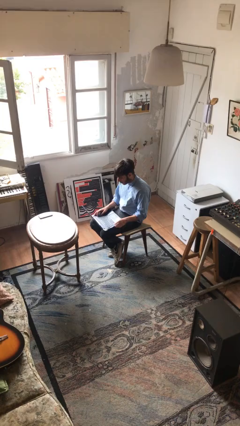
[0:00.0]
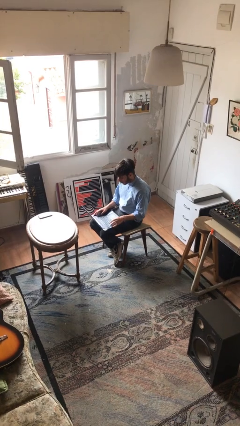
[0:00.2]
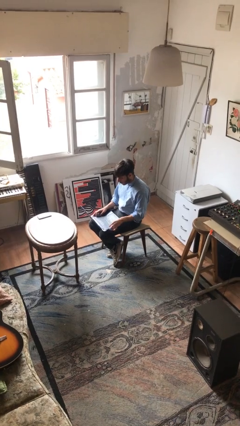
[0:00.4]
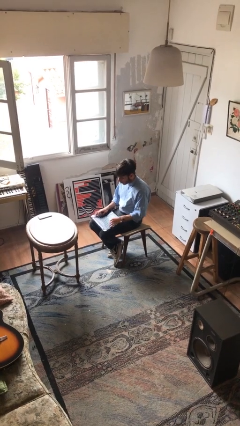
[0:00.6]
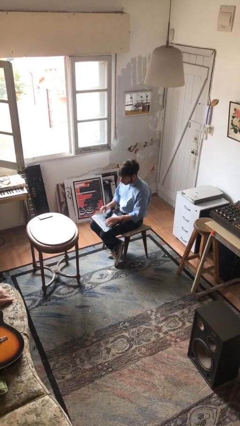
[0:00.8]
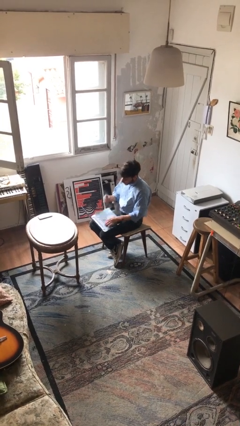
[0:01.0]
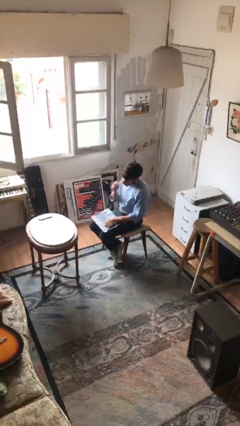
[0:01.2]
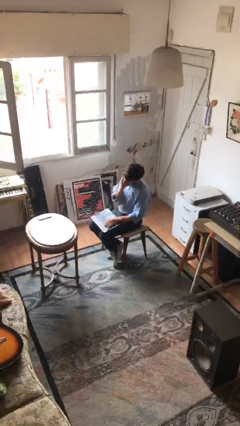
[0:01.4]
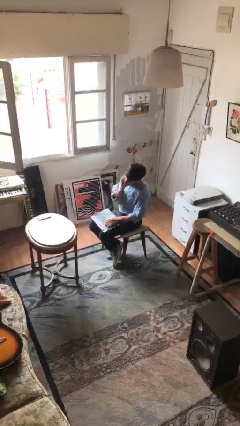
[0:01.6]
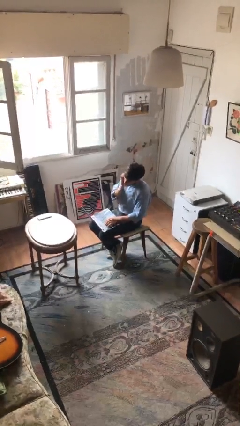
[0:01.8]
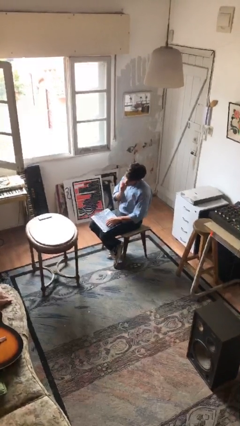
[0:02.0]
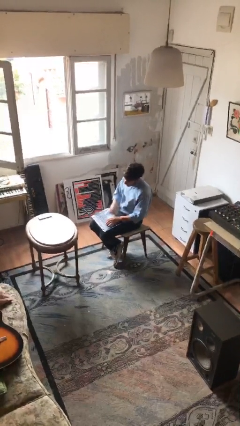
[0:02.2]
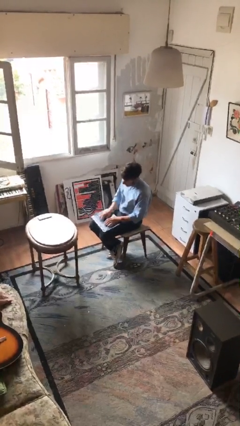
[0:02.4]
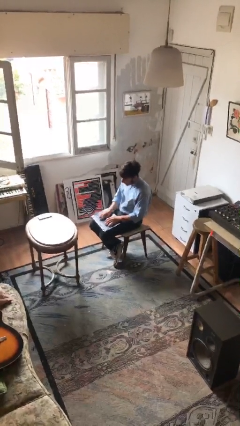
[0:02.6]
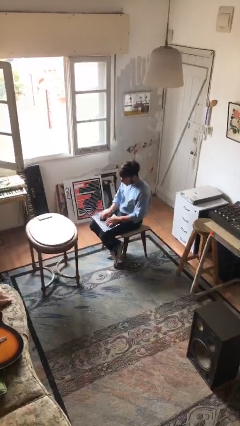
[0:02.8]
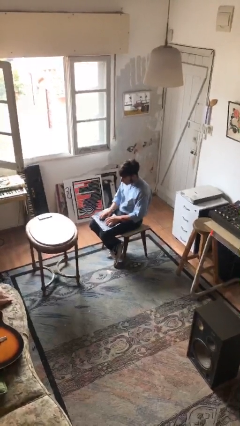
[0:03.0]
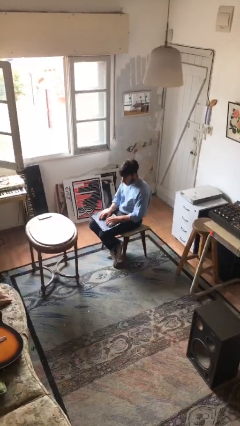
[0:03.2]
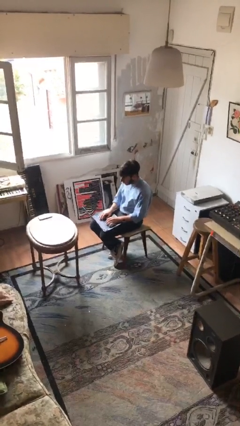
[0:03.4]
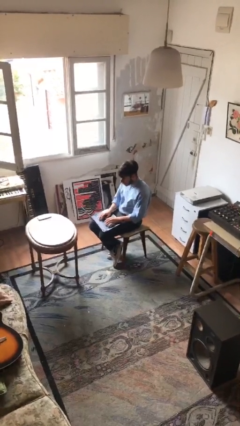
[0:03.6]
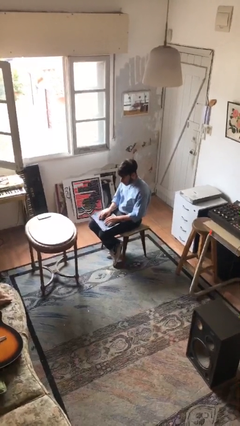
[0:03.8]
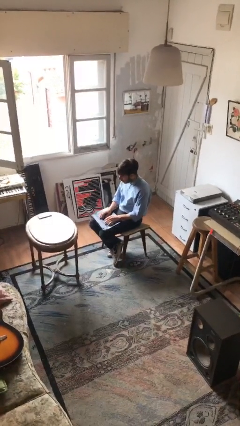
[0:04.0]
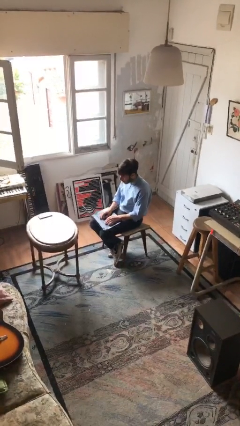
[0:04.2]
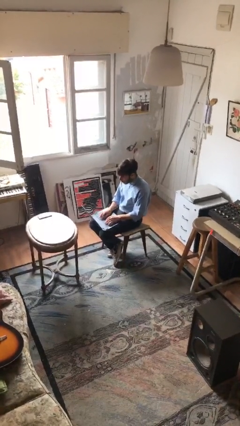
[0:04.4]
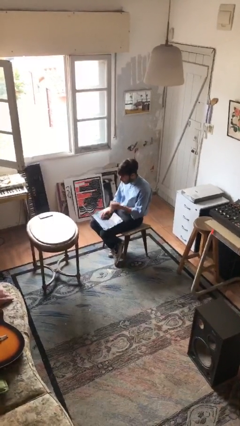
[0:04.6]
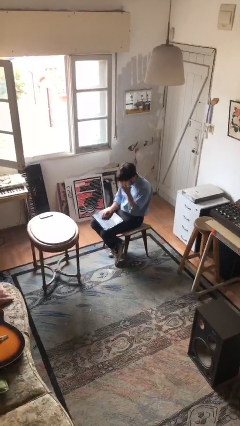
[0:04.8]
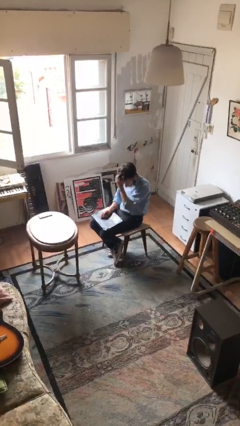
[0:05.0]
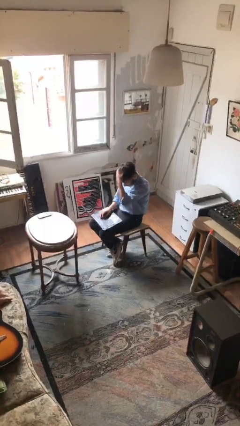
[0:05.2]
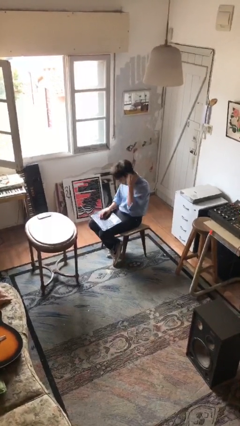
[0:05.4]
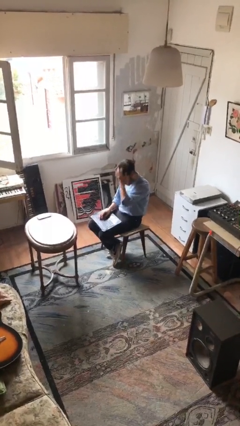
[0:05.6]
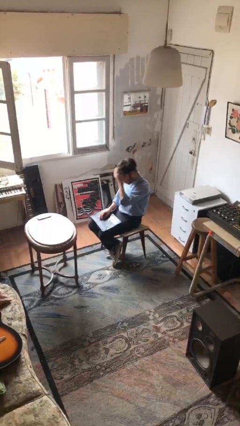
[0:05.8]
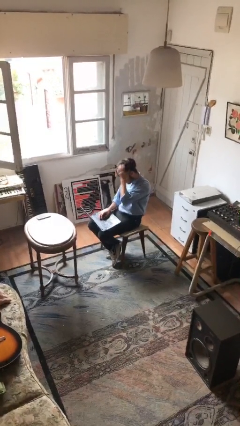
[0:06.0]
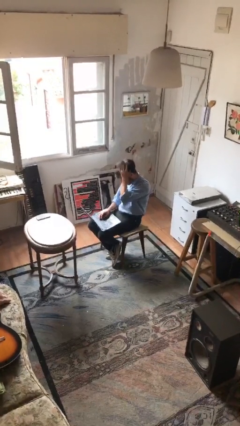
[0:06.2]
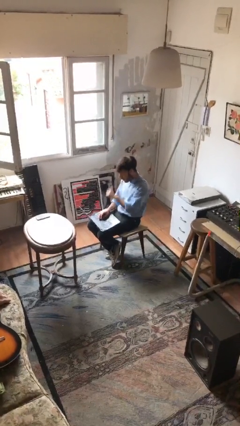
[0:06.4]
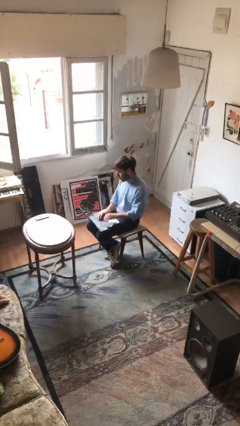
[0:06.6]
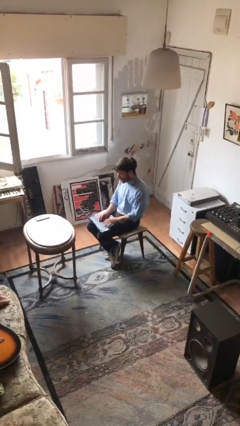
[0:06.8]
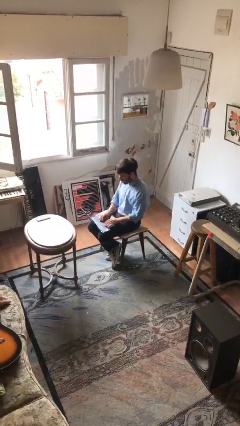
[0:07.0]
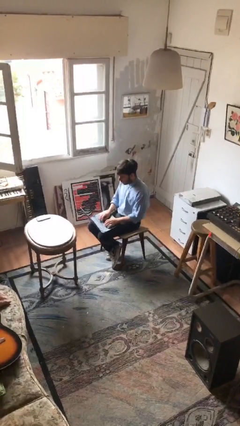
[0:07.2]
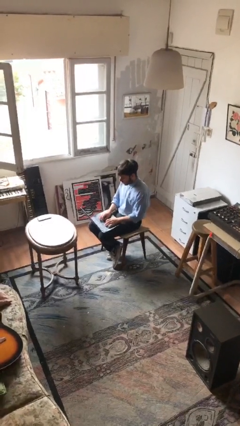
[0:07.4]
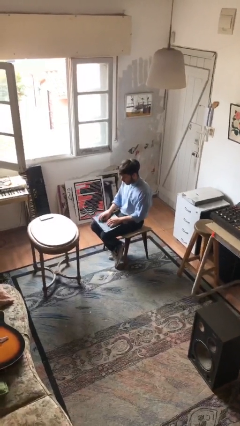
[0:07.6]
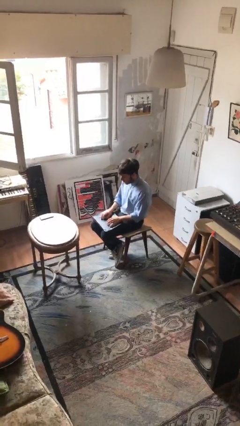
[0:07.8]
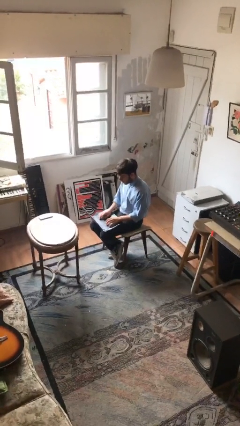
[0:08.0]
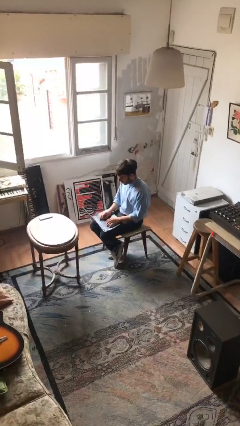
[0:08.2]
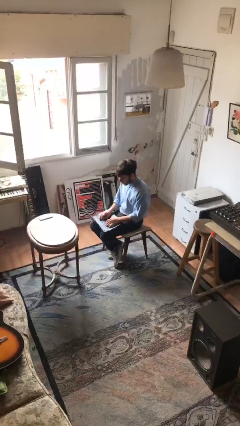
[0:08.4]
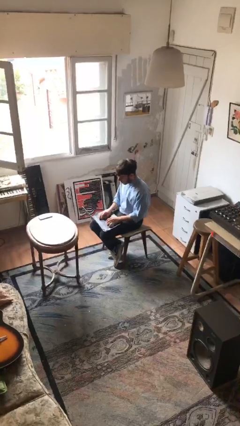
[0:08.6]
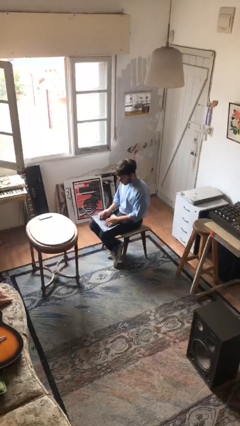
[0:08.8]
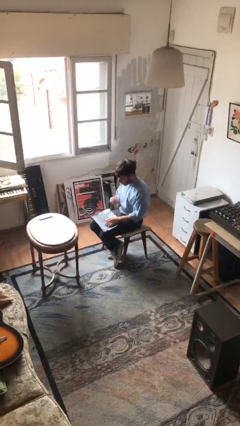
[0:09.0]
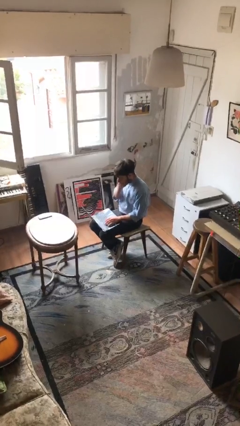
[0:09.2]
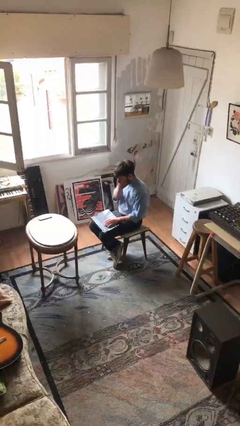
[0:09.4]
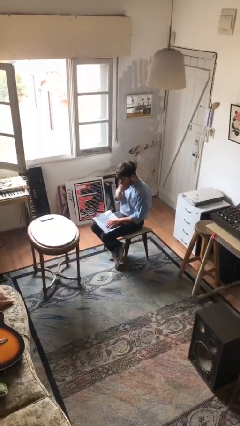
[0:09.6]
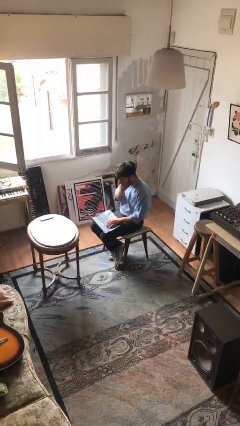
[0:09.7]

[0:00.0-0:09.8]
person interacts with laptop

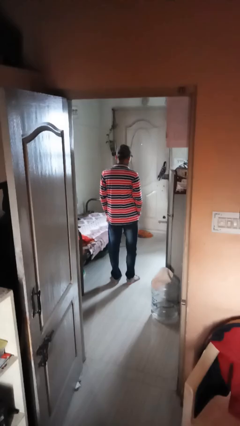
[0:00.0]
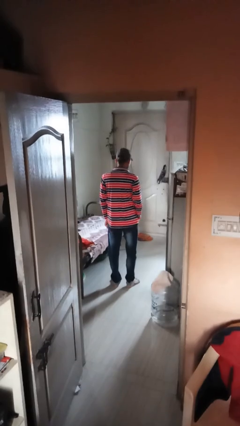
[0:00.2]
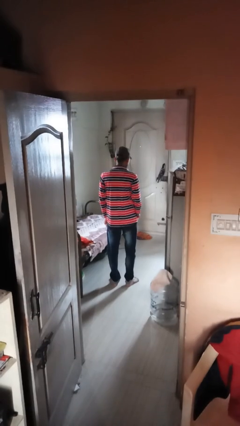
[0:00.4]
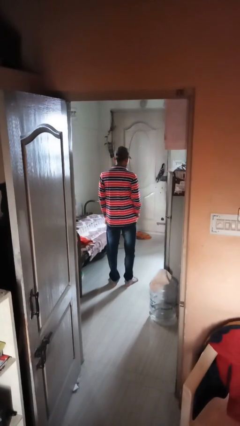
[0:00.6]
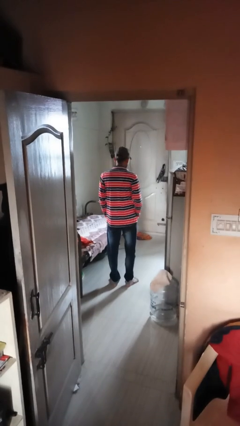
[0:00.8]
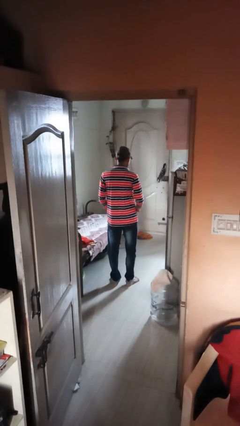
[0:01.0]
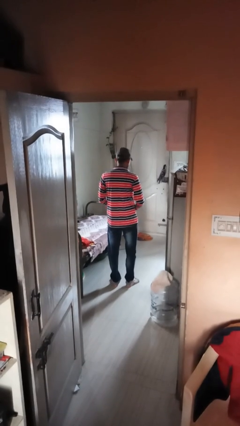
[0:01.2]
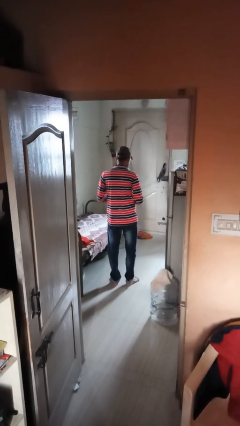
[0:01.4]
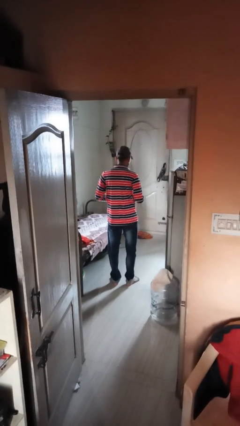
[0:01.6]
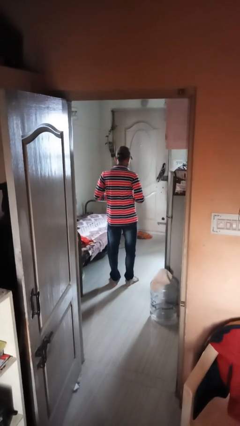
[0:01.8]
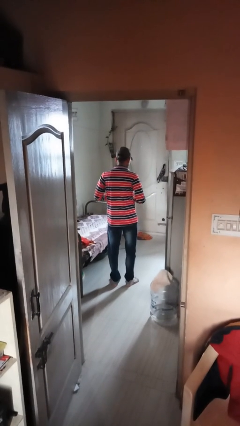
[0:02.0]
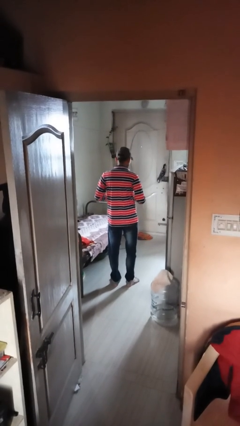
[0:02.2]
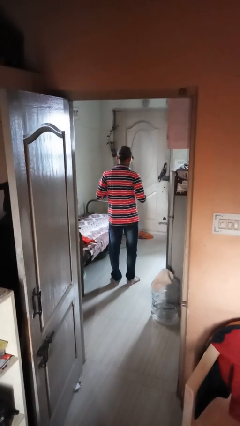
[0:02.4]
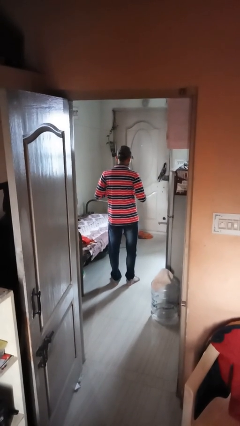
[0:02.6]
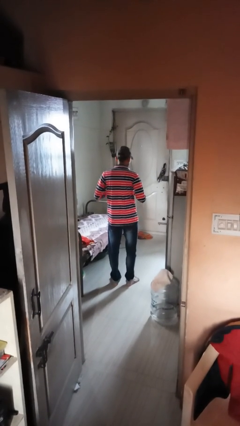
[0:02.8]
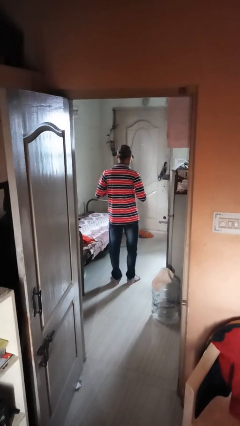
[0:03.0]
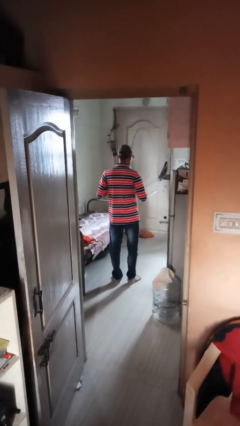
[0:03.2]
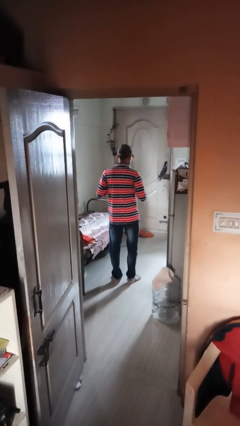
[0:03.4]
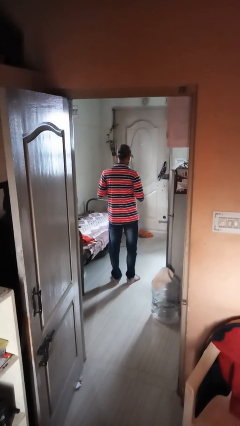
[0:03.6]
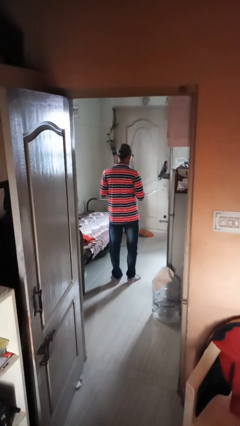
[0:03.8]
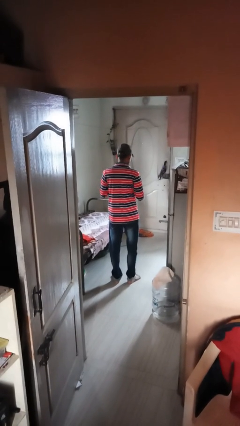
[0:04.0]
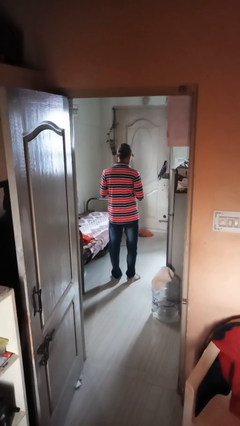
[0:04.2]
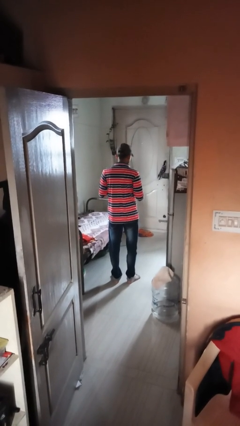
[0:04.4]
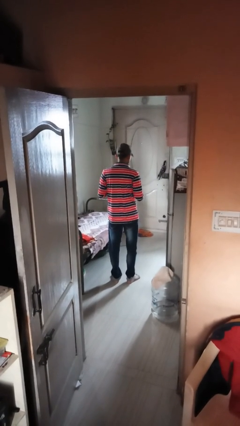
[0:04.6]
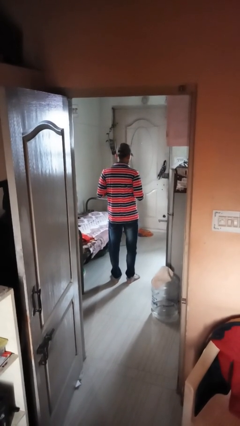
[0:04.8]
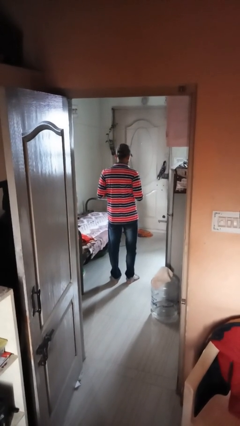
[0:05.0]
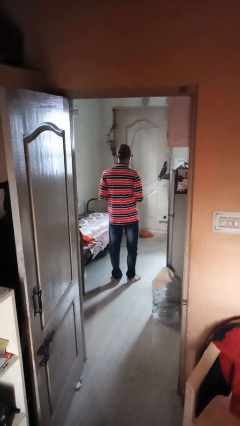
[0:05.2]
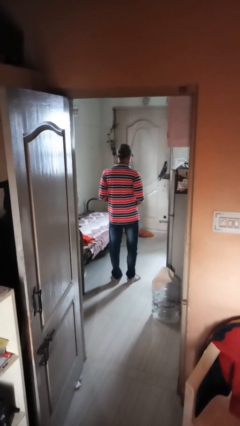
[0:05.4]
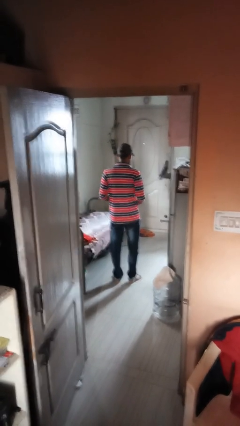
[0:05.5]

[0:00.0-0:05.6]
person buttons shirt

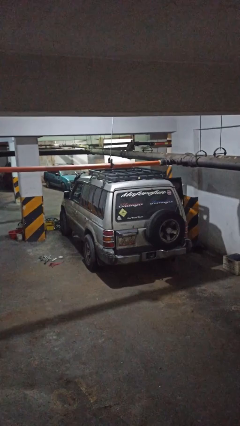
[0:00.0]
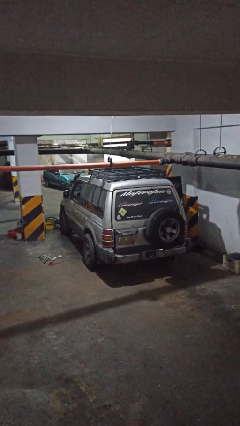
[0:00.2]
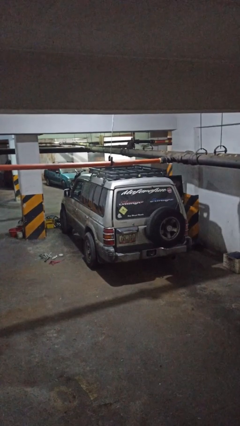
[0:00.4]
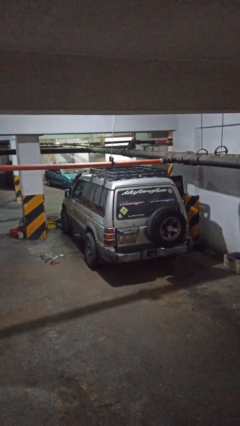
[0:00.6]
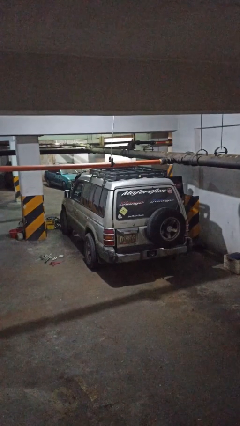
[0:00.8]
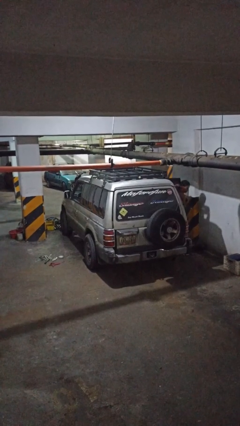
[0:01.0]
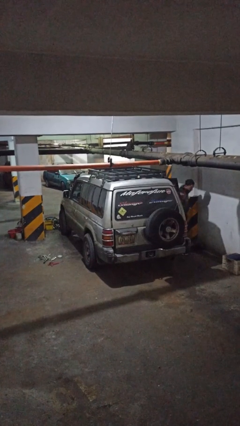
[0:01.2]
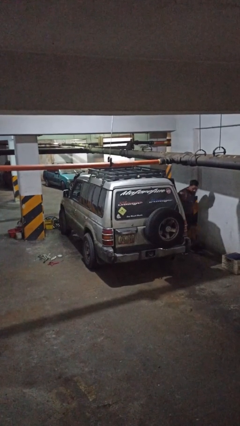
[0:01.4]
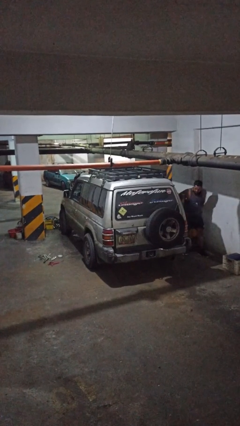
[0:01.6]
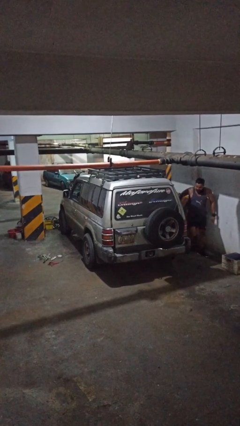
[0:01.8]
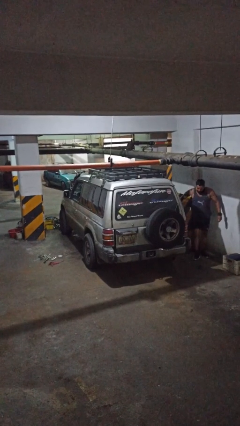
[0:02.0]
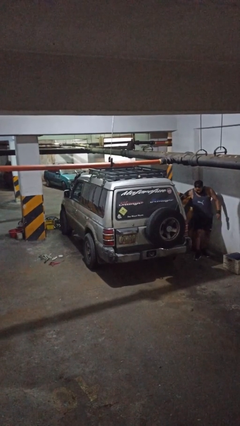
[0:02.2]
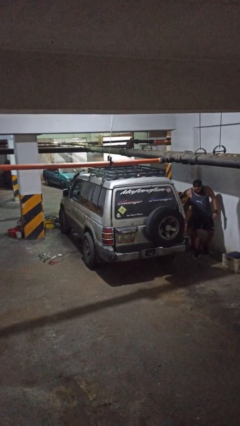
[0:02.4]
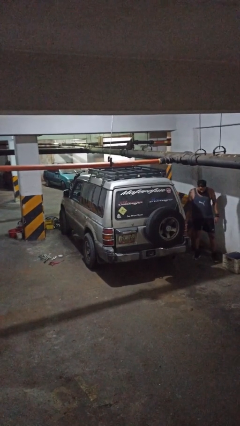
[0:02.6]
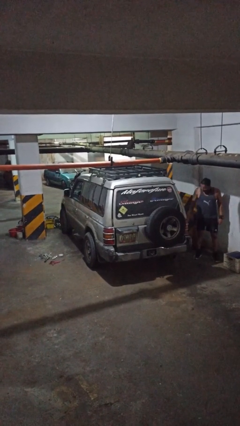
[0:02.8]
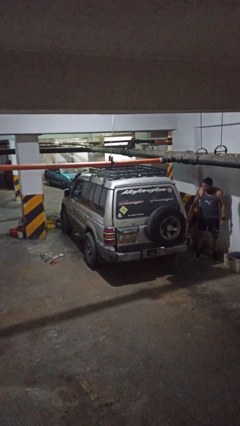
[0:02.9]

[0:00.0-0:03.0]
car drops off person
